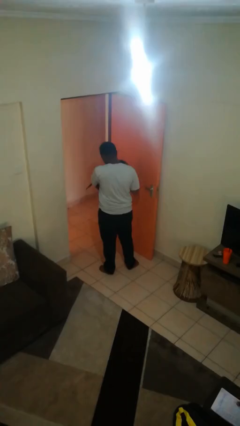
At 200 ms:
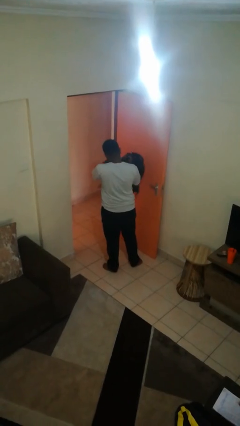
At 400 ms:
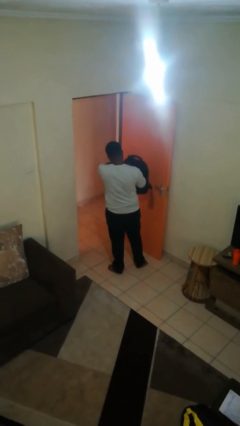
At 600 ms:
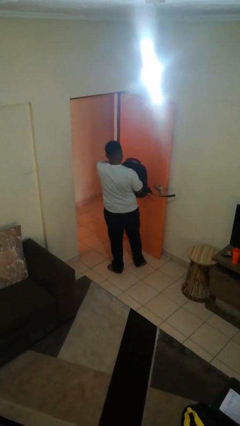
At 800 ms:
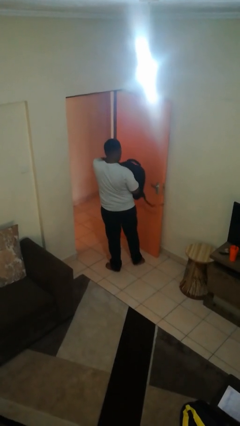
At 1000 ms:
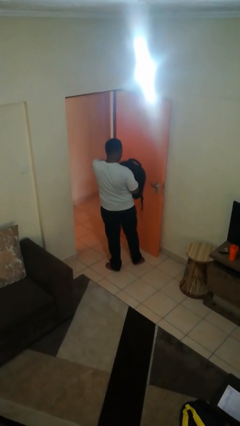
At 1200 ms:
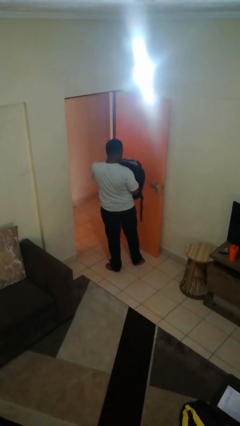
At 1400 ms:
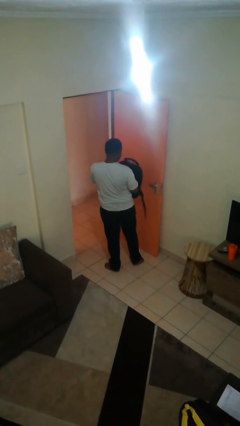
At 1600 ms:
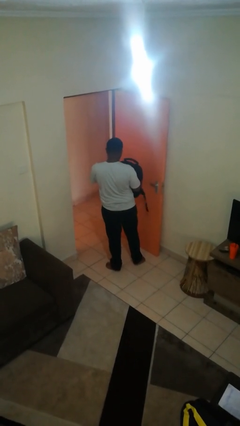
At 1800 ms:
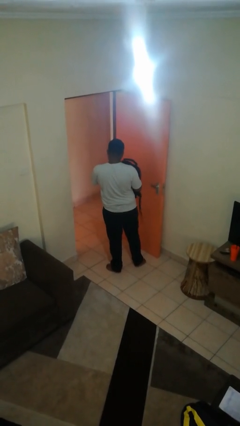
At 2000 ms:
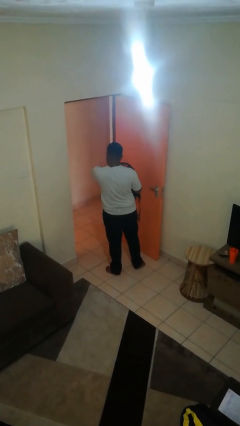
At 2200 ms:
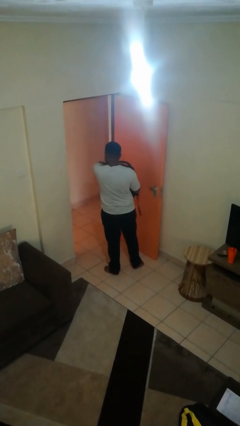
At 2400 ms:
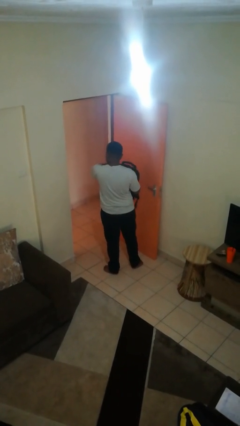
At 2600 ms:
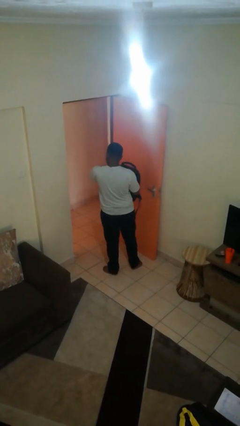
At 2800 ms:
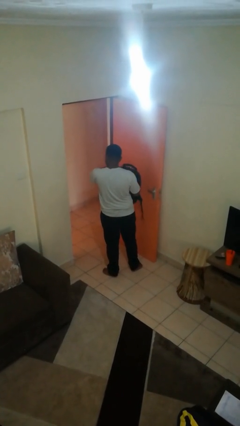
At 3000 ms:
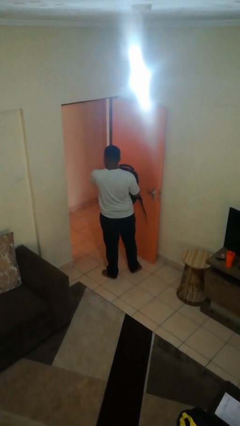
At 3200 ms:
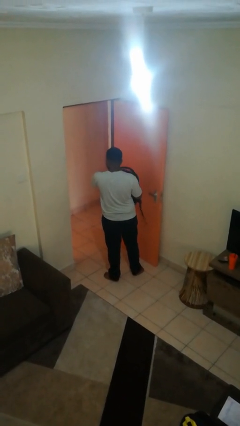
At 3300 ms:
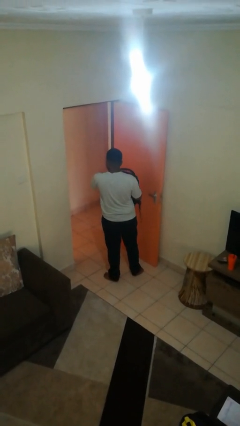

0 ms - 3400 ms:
person searches in backpack

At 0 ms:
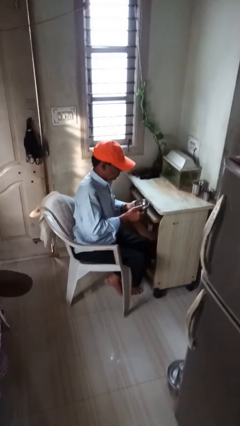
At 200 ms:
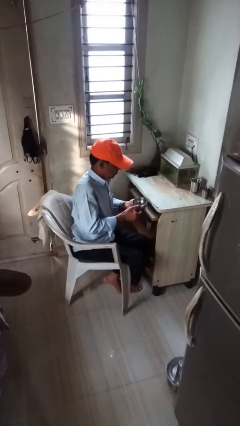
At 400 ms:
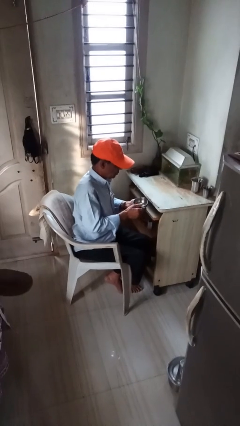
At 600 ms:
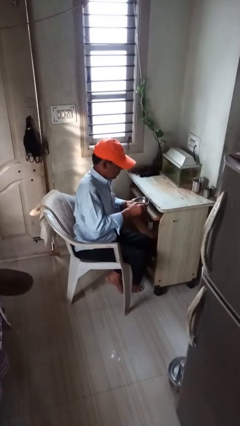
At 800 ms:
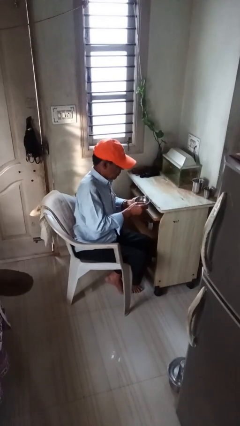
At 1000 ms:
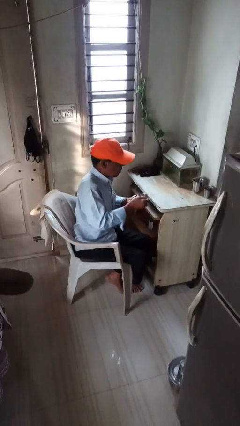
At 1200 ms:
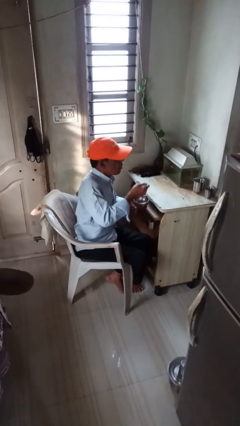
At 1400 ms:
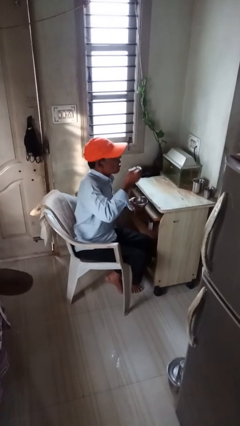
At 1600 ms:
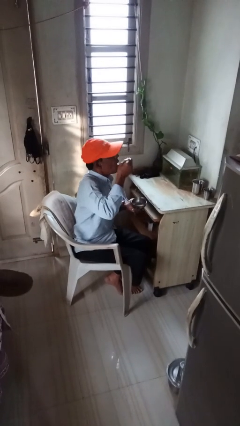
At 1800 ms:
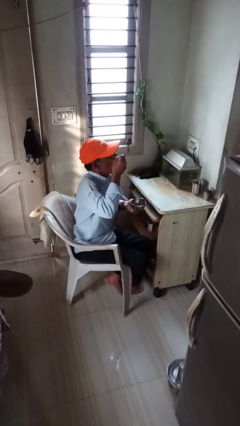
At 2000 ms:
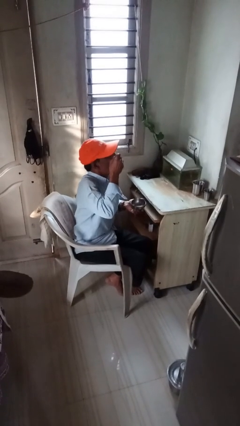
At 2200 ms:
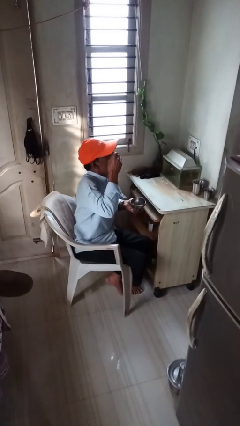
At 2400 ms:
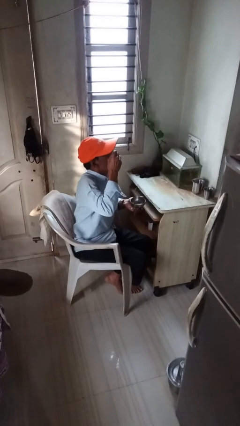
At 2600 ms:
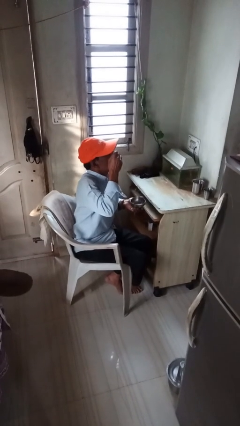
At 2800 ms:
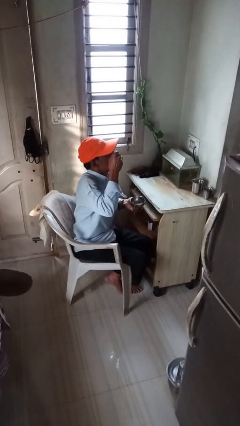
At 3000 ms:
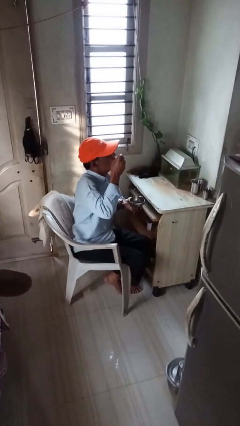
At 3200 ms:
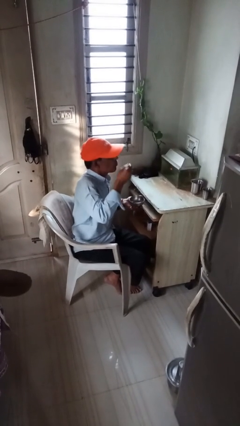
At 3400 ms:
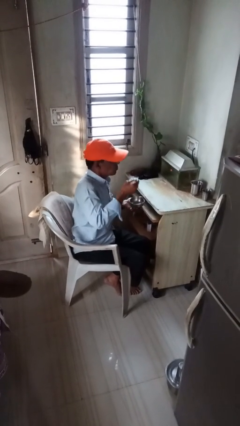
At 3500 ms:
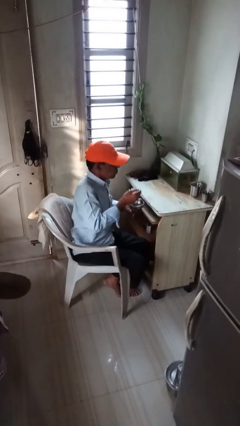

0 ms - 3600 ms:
person eats with utensil

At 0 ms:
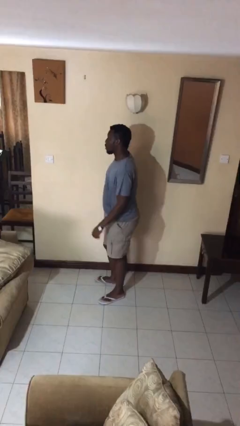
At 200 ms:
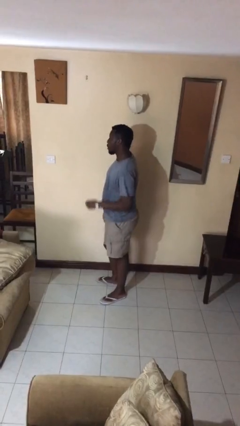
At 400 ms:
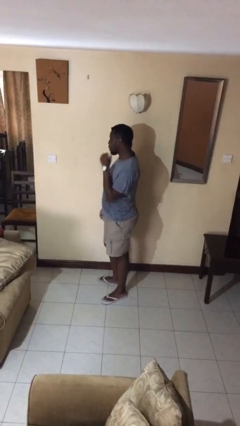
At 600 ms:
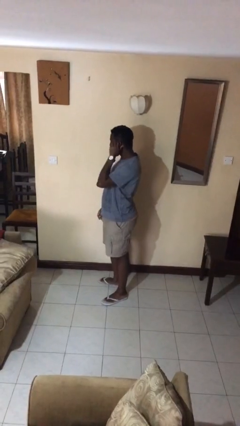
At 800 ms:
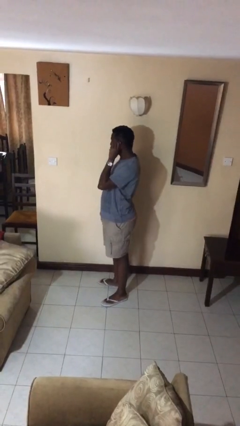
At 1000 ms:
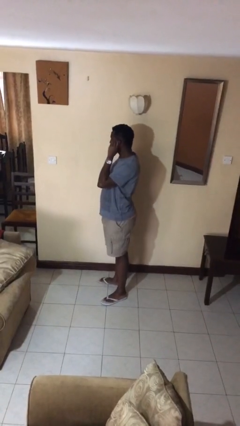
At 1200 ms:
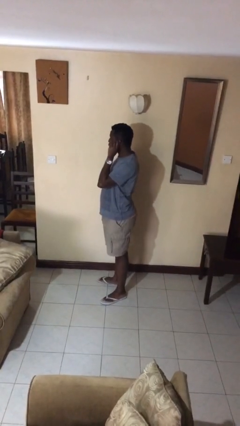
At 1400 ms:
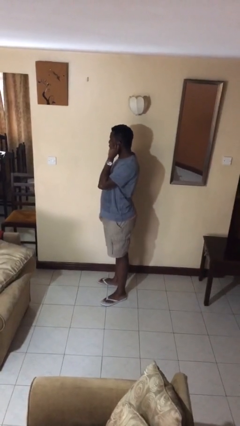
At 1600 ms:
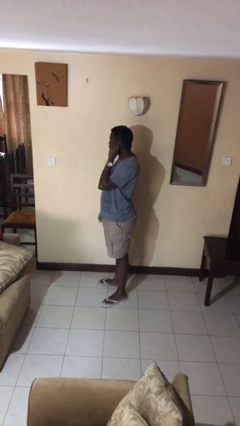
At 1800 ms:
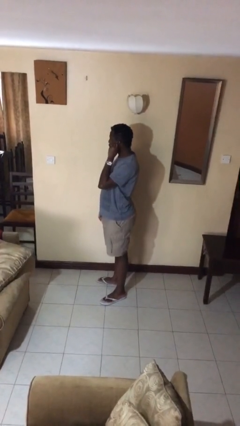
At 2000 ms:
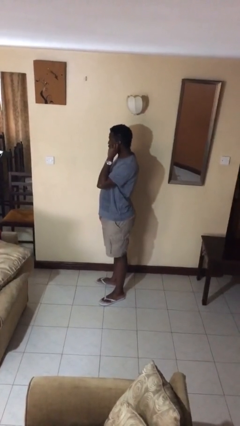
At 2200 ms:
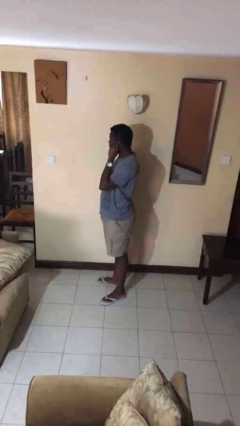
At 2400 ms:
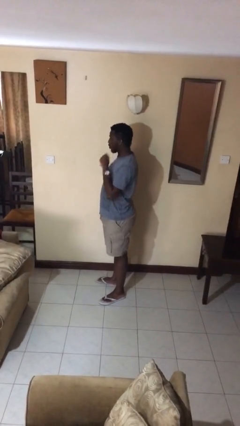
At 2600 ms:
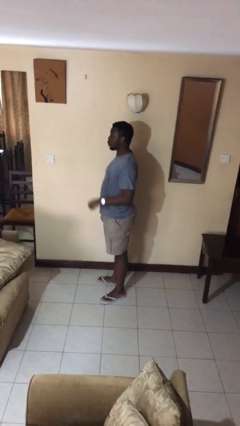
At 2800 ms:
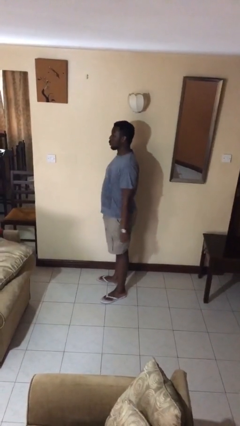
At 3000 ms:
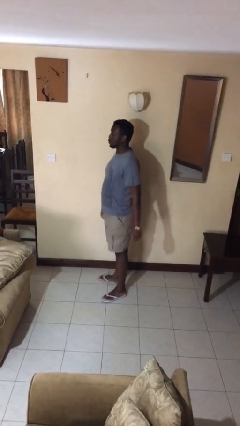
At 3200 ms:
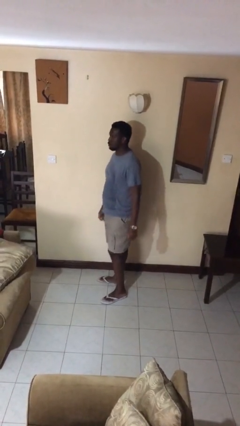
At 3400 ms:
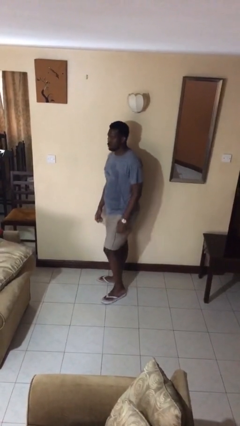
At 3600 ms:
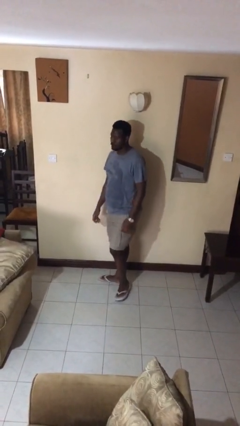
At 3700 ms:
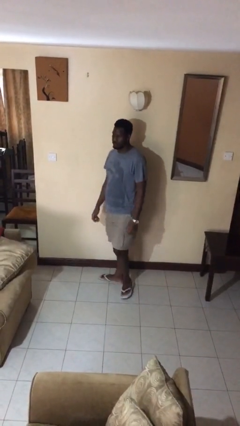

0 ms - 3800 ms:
person touches earlobe

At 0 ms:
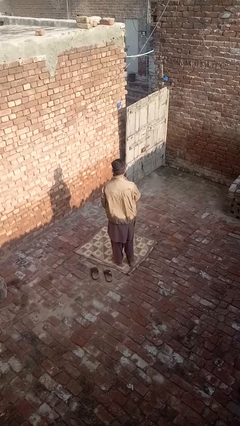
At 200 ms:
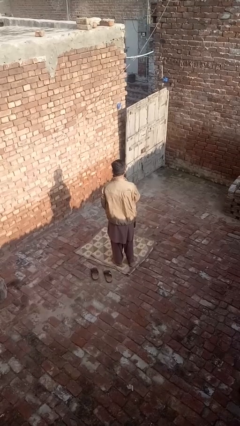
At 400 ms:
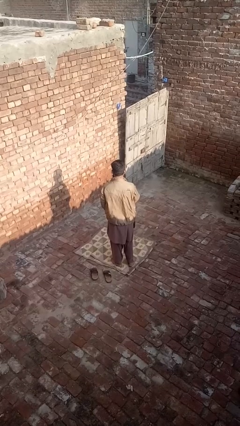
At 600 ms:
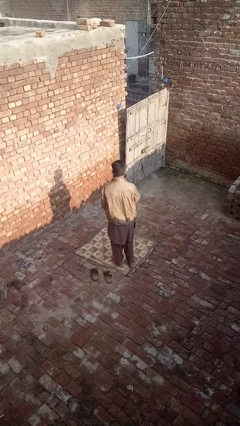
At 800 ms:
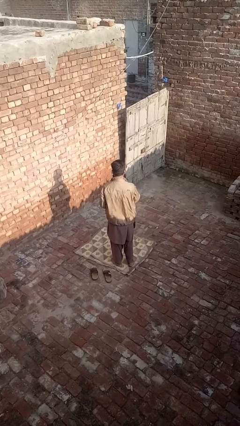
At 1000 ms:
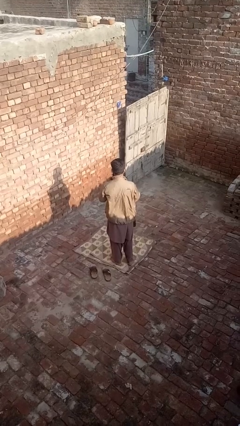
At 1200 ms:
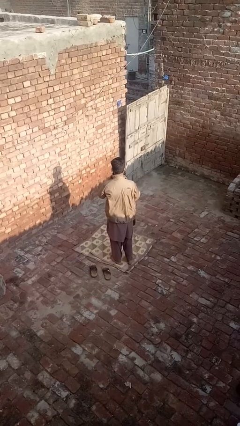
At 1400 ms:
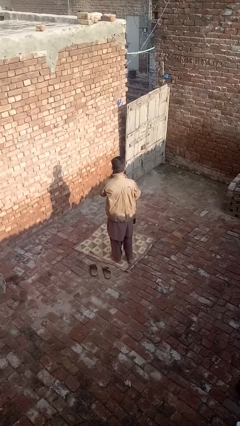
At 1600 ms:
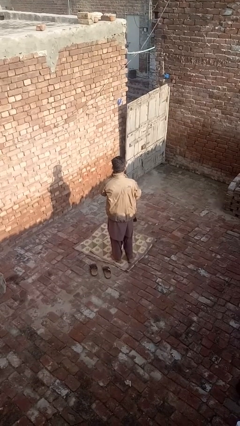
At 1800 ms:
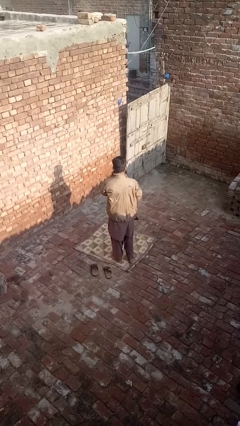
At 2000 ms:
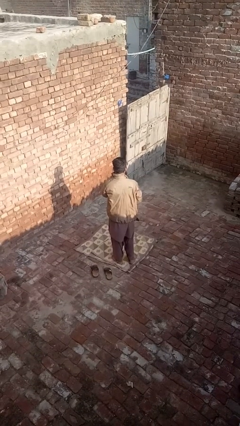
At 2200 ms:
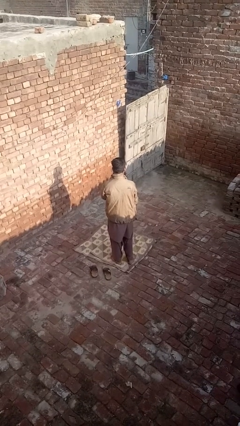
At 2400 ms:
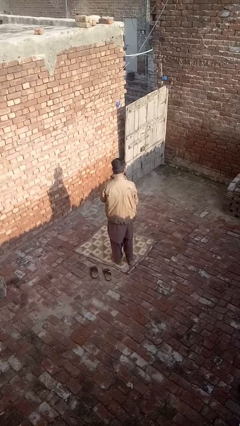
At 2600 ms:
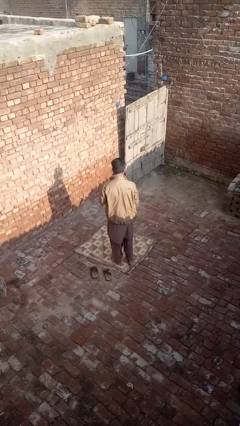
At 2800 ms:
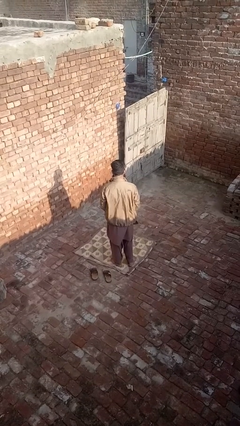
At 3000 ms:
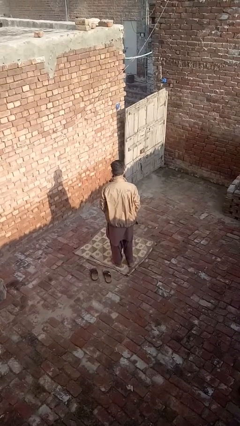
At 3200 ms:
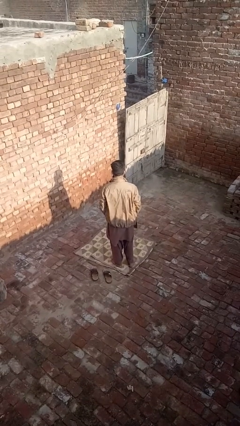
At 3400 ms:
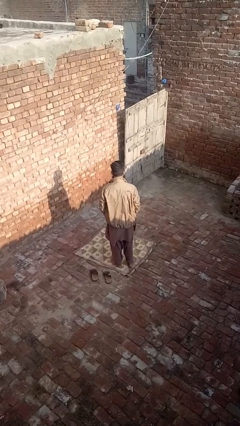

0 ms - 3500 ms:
person unzips jacket

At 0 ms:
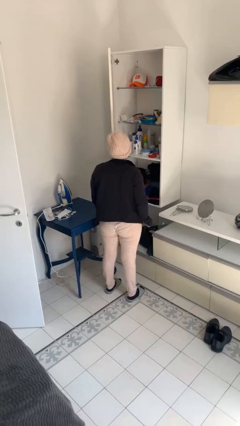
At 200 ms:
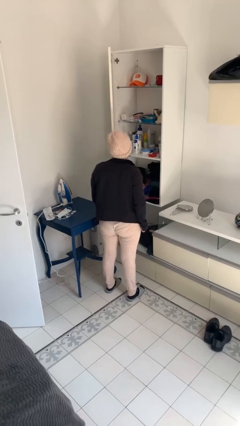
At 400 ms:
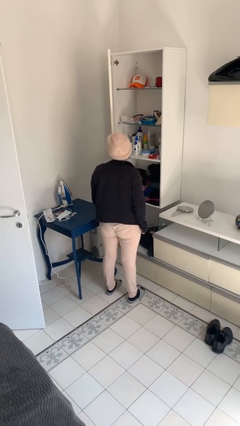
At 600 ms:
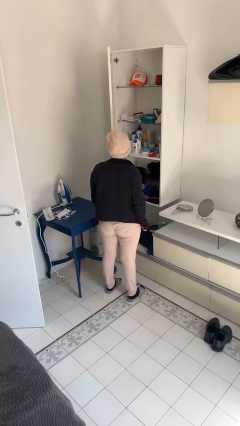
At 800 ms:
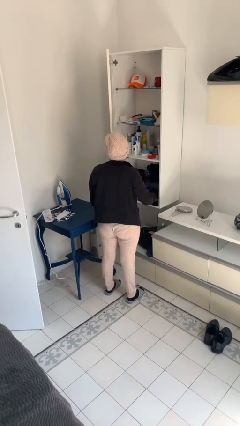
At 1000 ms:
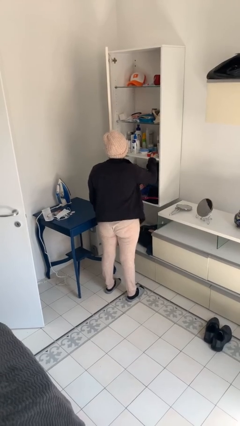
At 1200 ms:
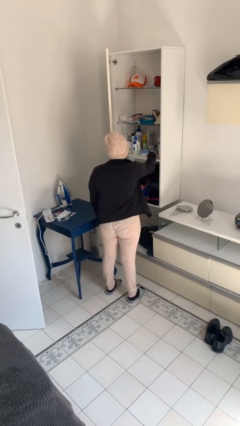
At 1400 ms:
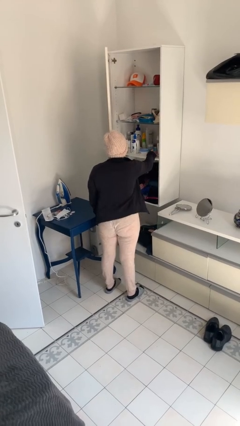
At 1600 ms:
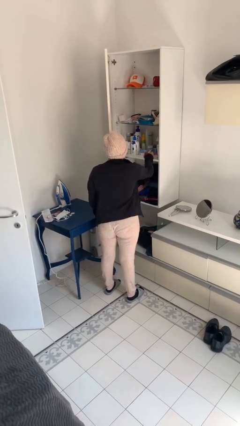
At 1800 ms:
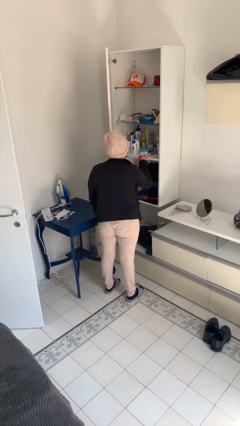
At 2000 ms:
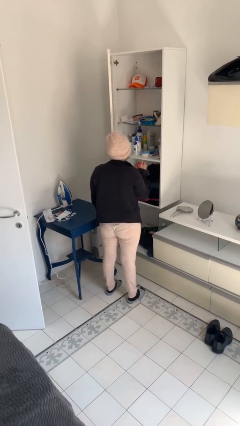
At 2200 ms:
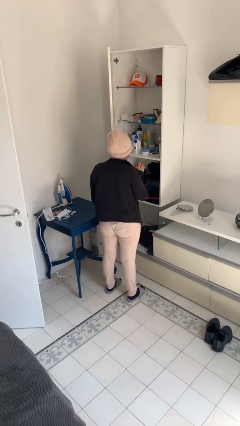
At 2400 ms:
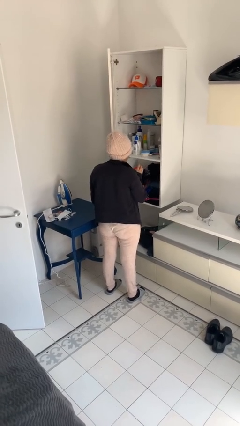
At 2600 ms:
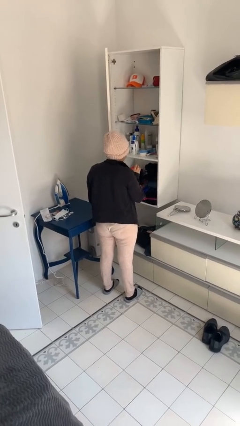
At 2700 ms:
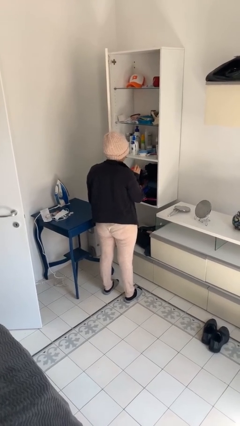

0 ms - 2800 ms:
person picks up object from shelf

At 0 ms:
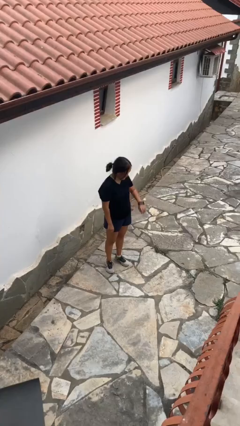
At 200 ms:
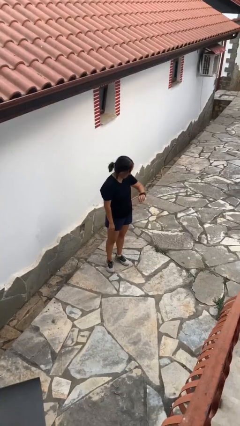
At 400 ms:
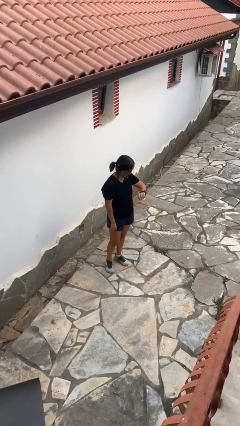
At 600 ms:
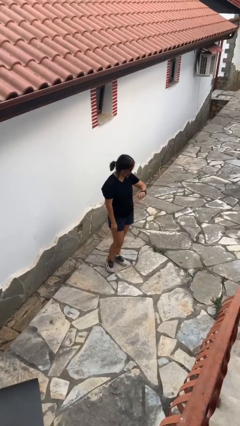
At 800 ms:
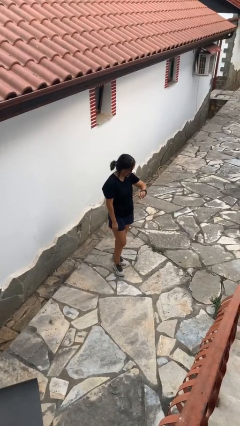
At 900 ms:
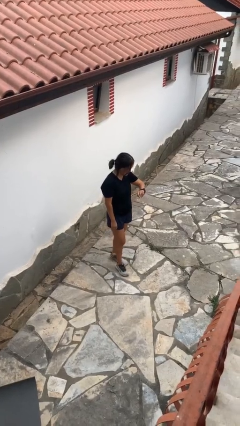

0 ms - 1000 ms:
person looks at wristwatch
